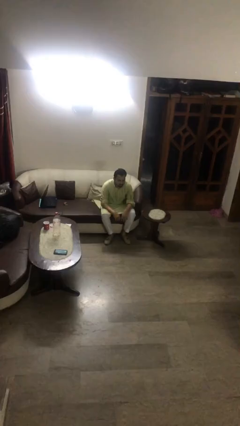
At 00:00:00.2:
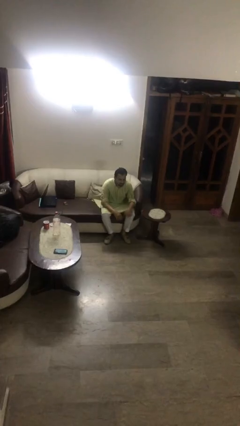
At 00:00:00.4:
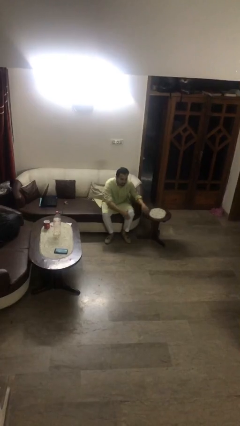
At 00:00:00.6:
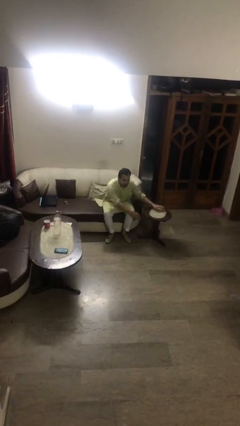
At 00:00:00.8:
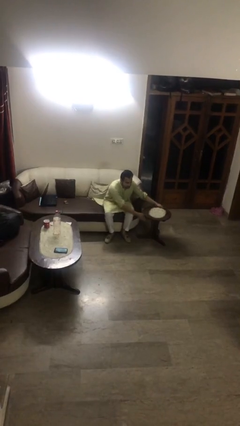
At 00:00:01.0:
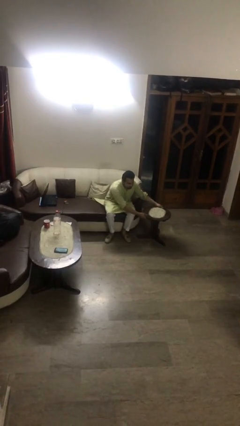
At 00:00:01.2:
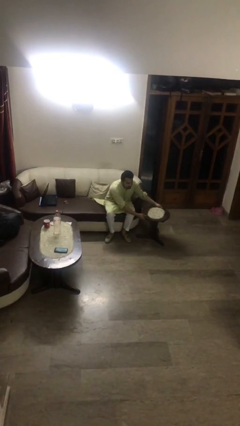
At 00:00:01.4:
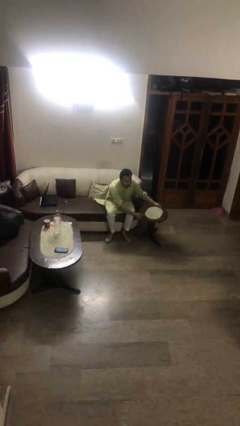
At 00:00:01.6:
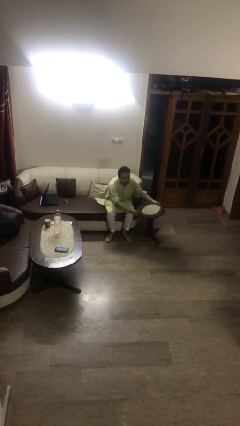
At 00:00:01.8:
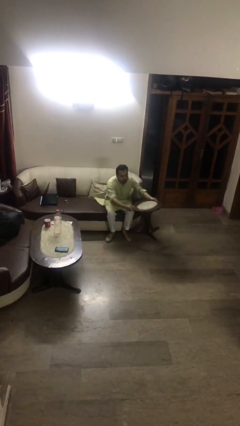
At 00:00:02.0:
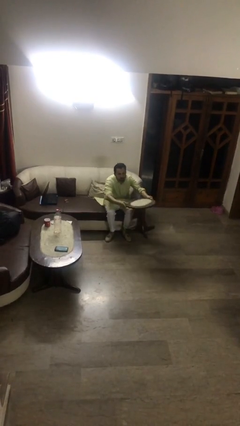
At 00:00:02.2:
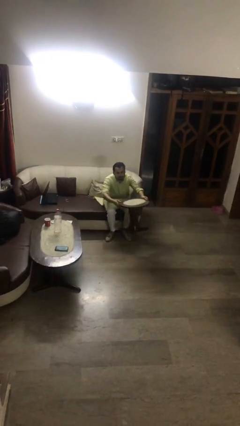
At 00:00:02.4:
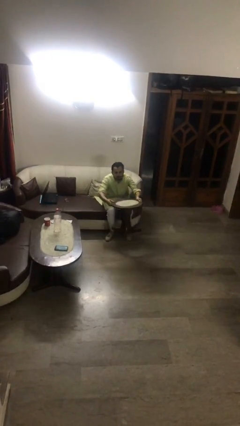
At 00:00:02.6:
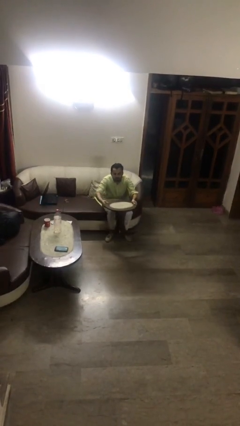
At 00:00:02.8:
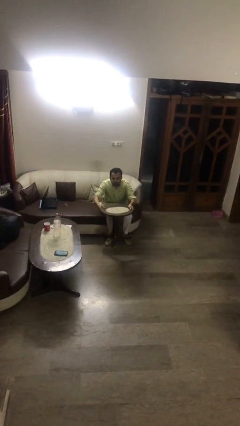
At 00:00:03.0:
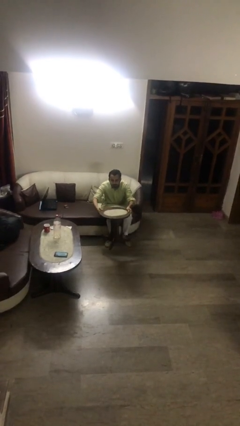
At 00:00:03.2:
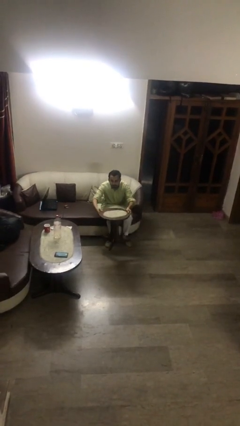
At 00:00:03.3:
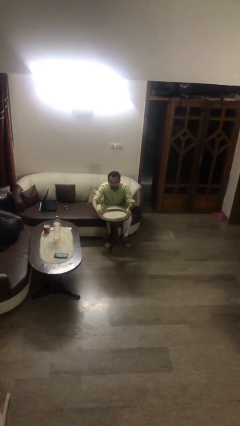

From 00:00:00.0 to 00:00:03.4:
person picks up object from floor

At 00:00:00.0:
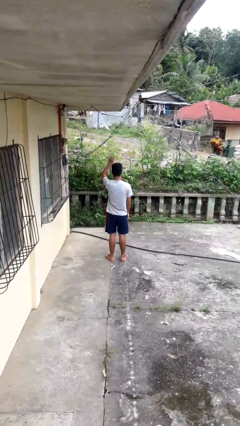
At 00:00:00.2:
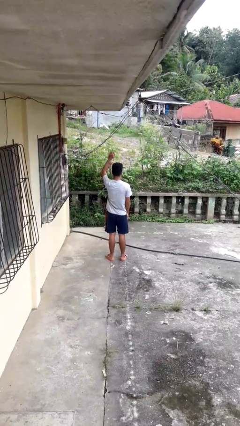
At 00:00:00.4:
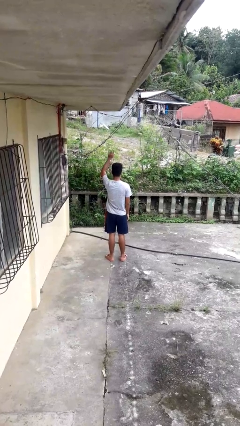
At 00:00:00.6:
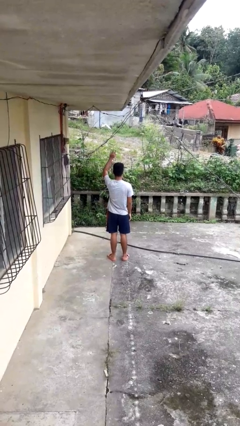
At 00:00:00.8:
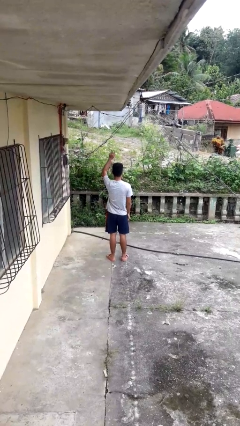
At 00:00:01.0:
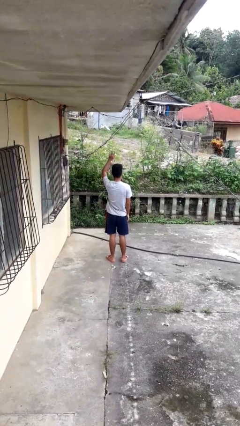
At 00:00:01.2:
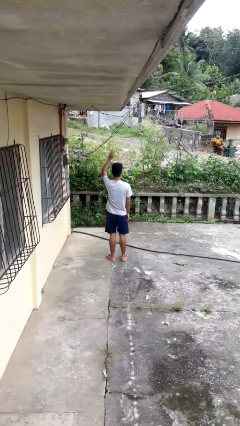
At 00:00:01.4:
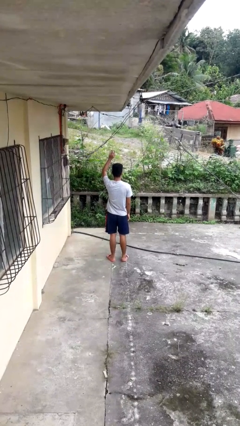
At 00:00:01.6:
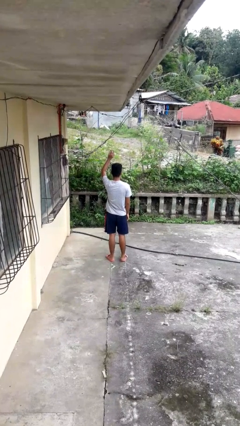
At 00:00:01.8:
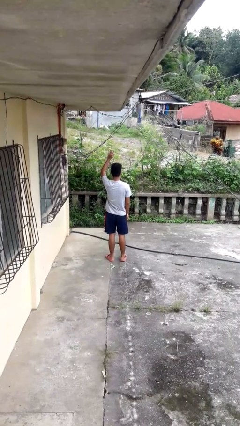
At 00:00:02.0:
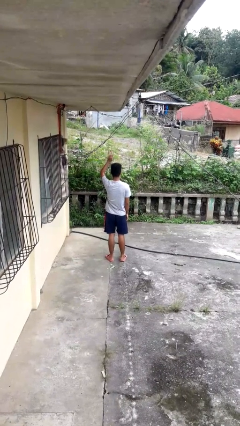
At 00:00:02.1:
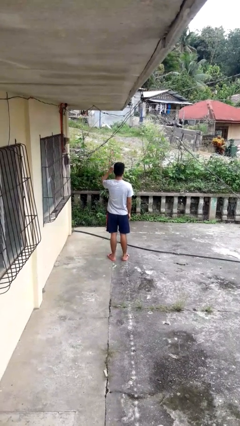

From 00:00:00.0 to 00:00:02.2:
person gestures raise hand

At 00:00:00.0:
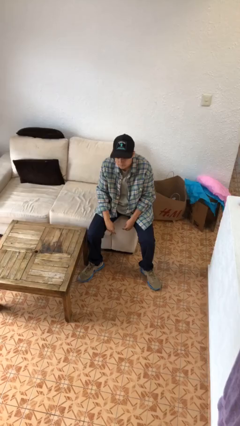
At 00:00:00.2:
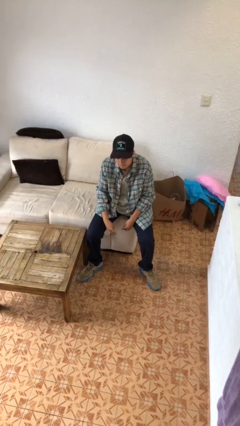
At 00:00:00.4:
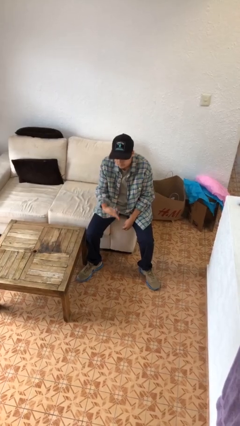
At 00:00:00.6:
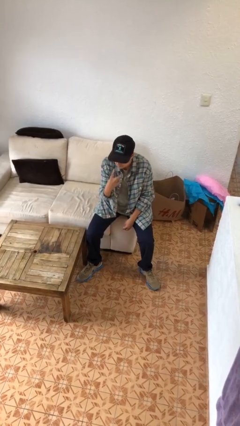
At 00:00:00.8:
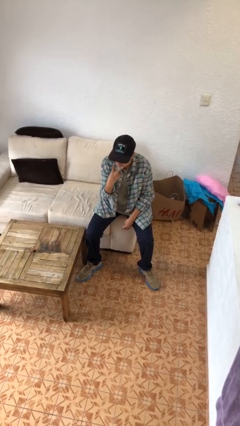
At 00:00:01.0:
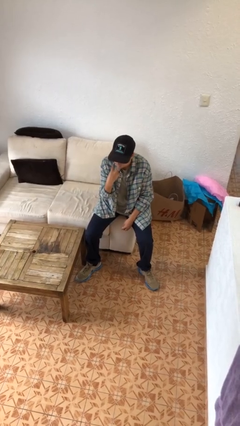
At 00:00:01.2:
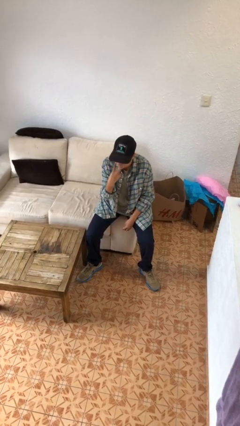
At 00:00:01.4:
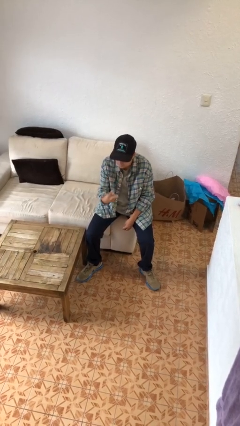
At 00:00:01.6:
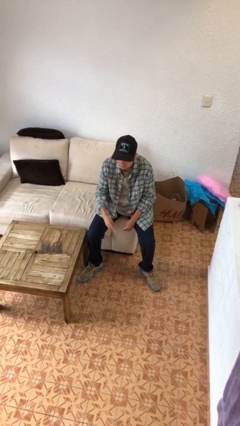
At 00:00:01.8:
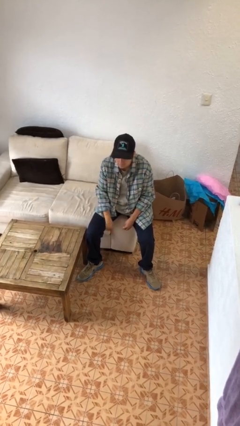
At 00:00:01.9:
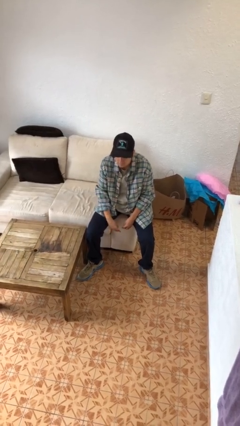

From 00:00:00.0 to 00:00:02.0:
person gestures watch closely

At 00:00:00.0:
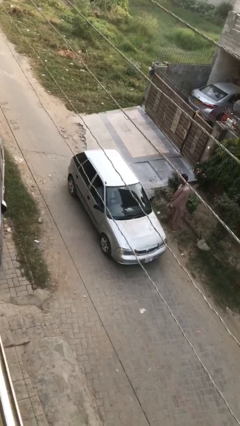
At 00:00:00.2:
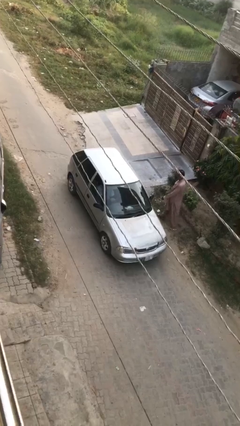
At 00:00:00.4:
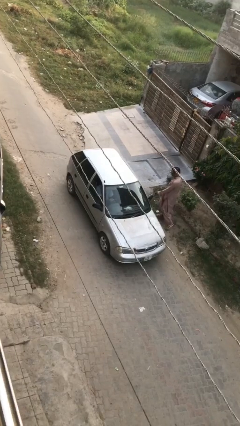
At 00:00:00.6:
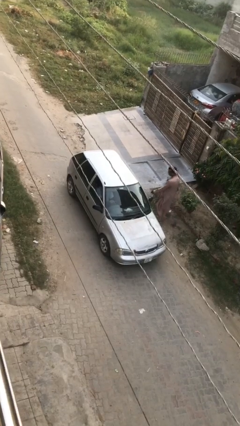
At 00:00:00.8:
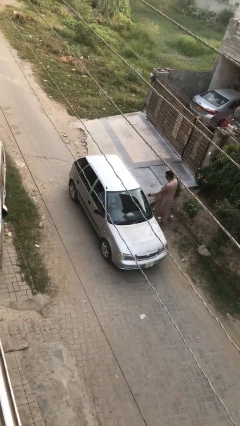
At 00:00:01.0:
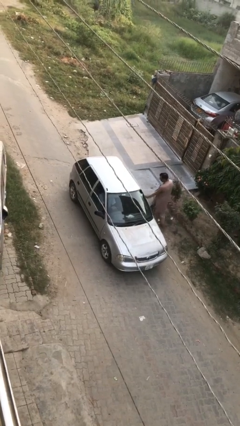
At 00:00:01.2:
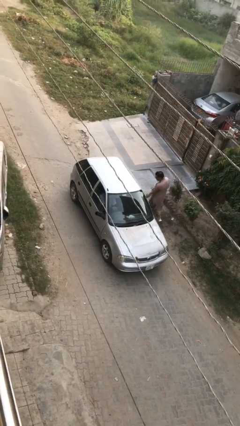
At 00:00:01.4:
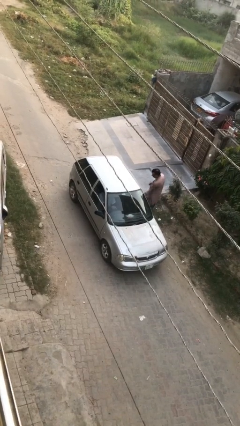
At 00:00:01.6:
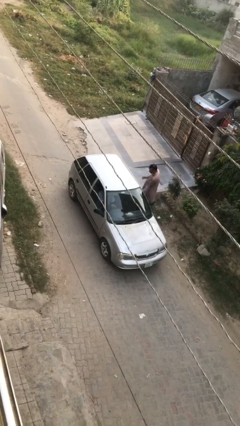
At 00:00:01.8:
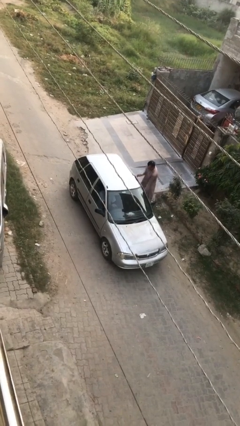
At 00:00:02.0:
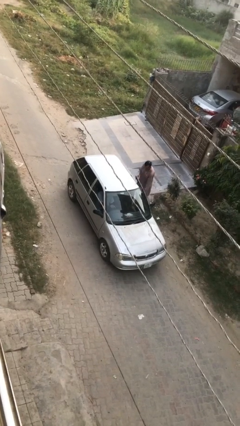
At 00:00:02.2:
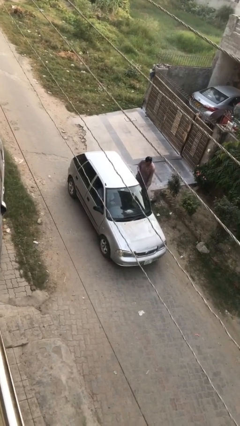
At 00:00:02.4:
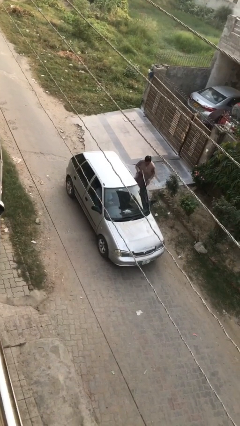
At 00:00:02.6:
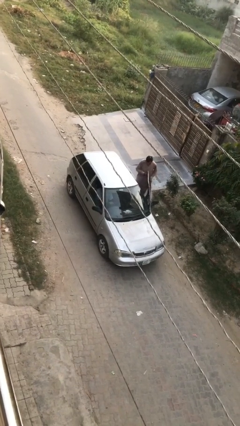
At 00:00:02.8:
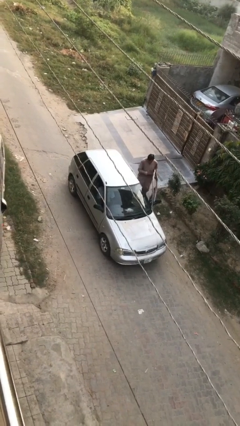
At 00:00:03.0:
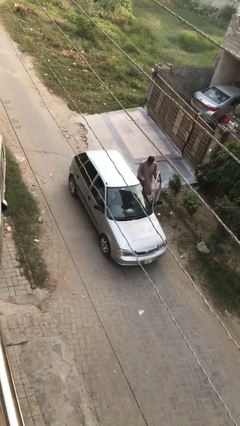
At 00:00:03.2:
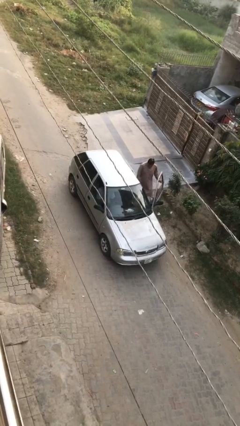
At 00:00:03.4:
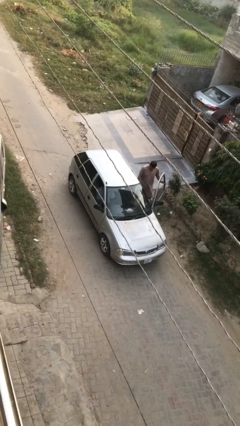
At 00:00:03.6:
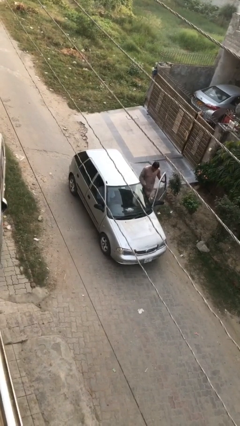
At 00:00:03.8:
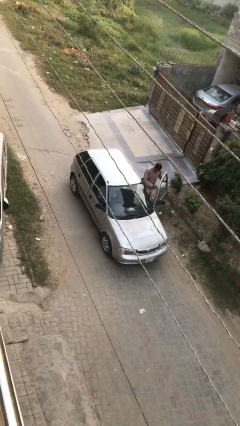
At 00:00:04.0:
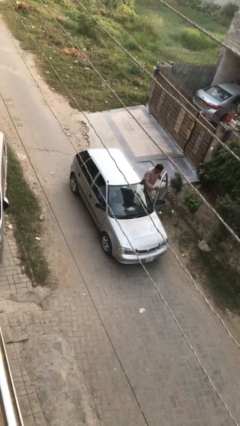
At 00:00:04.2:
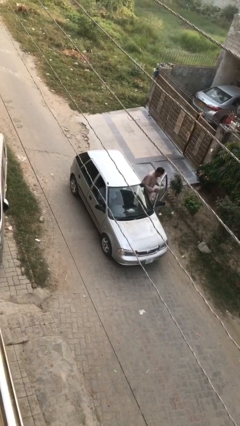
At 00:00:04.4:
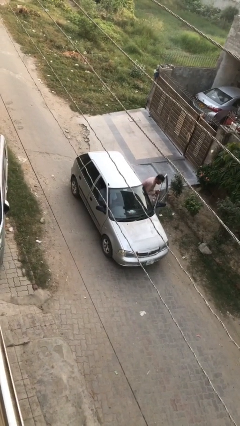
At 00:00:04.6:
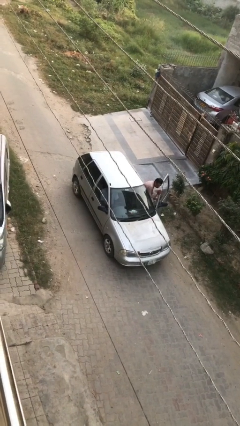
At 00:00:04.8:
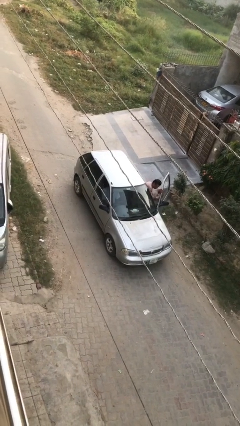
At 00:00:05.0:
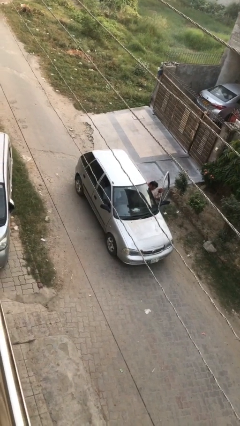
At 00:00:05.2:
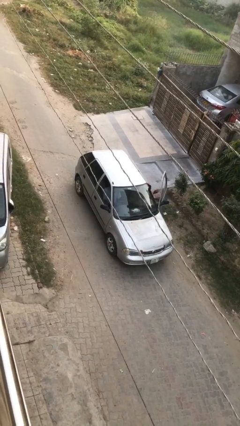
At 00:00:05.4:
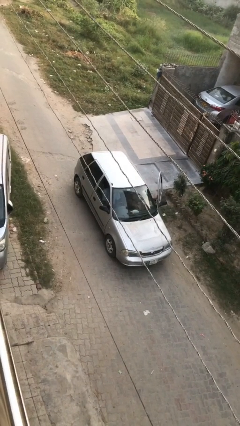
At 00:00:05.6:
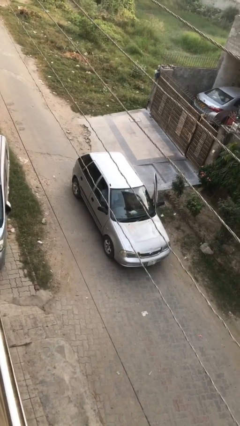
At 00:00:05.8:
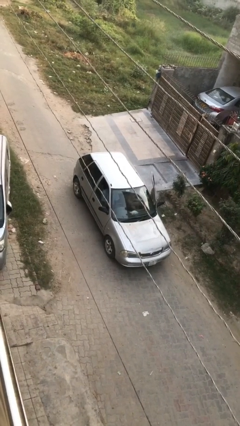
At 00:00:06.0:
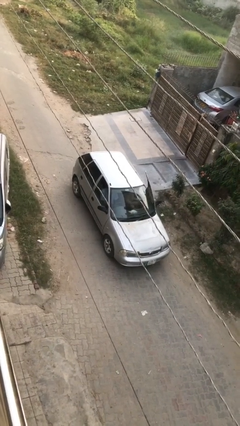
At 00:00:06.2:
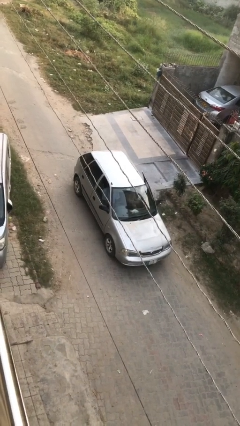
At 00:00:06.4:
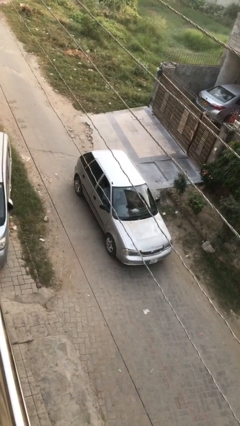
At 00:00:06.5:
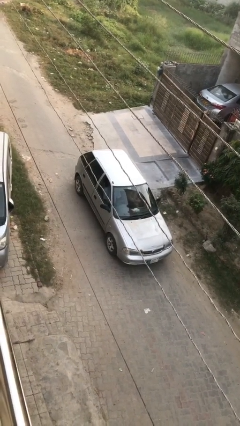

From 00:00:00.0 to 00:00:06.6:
car picks up person

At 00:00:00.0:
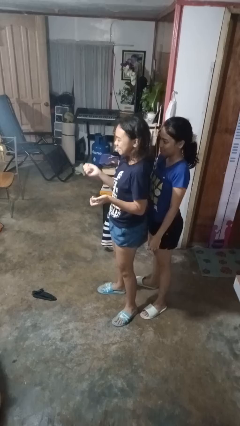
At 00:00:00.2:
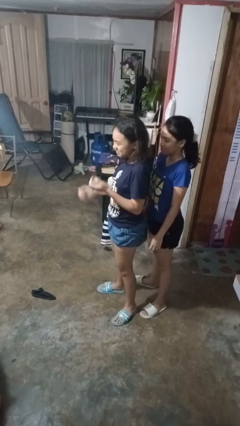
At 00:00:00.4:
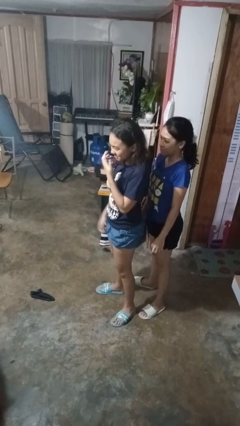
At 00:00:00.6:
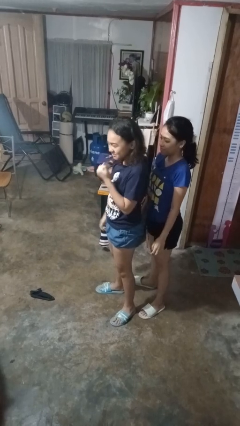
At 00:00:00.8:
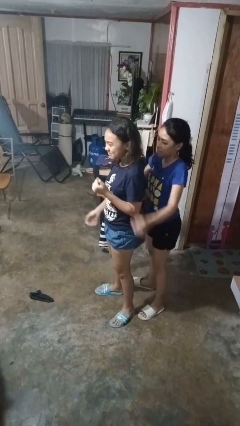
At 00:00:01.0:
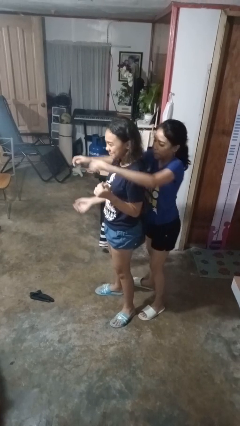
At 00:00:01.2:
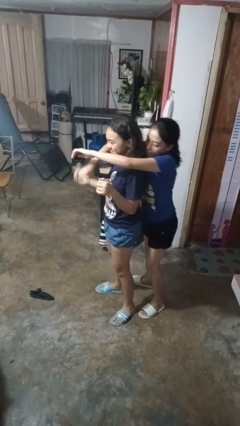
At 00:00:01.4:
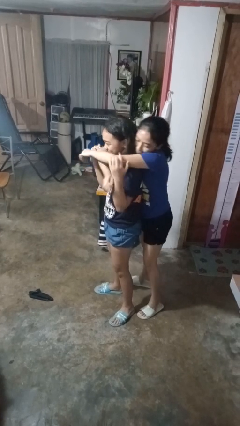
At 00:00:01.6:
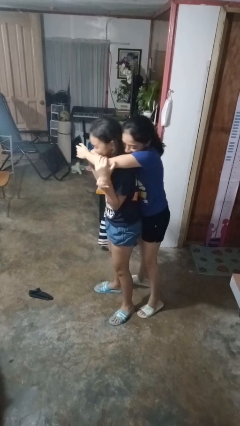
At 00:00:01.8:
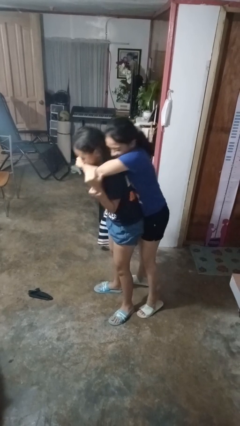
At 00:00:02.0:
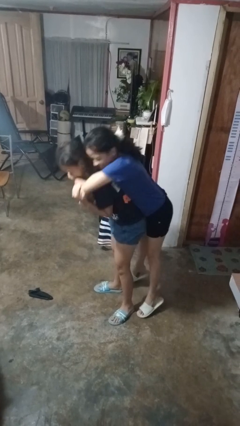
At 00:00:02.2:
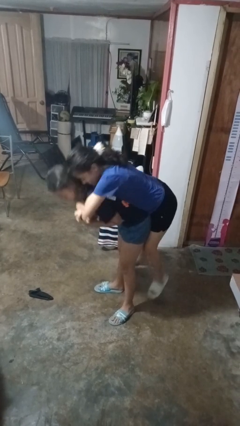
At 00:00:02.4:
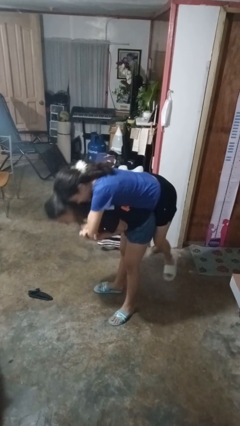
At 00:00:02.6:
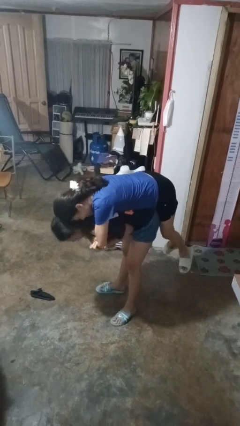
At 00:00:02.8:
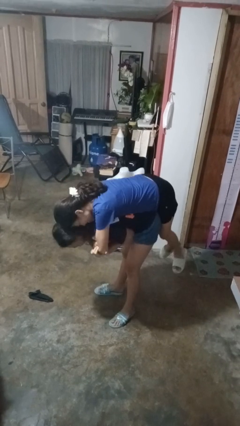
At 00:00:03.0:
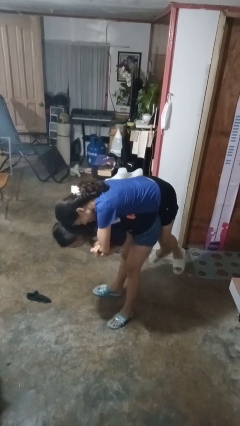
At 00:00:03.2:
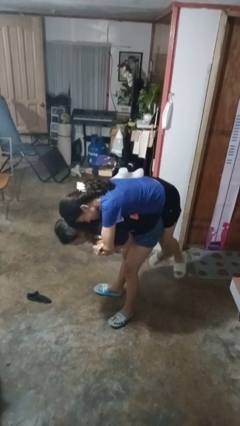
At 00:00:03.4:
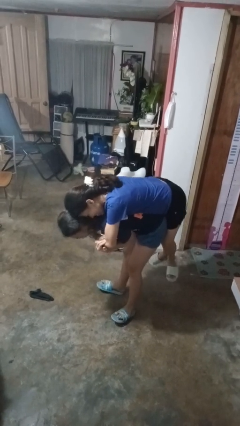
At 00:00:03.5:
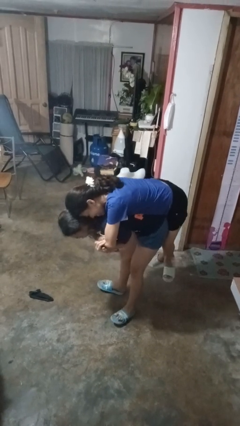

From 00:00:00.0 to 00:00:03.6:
person picks up person
